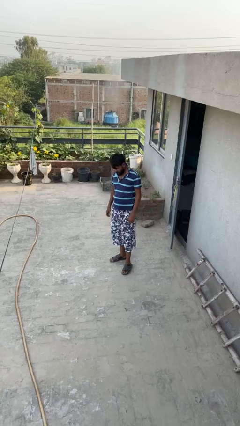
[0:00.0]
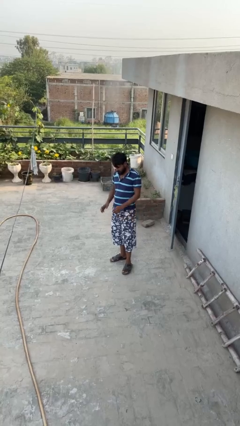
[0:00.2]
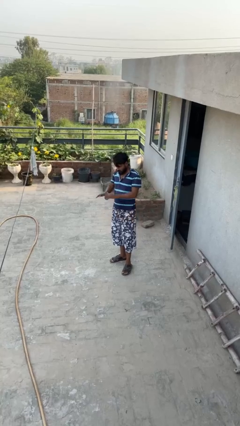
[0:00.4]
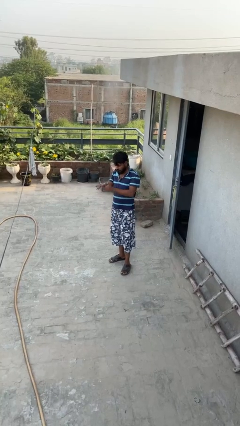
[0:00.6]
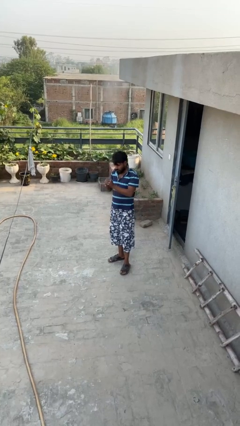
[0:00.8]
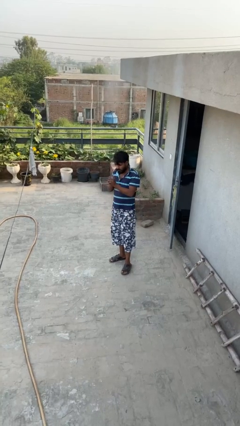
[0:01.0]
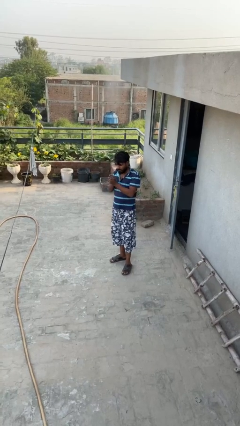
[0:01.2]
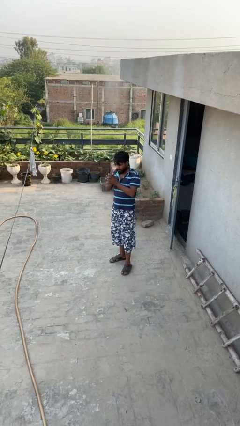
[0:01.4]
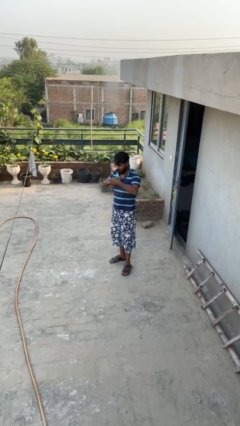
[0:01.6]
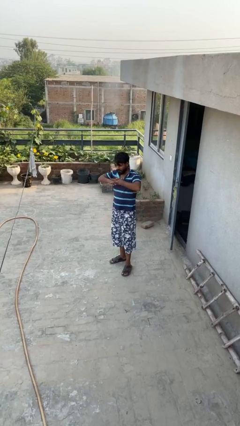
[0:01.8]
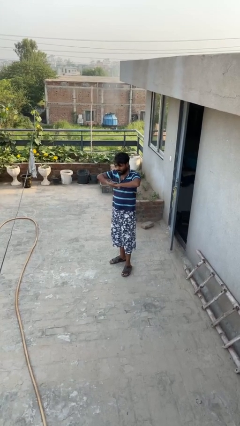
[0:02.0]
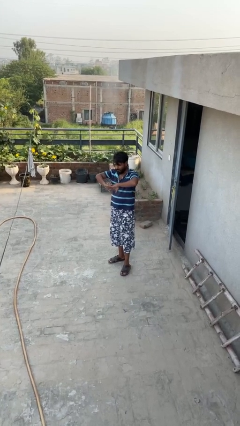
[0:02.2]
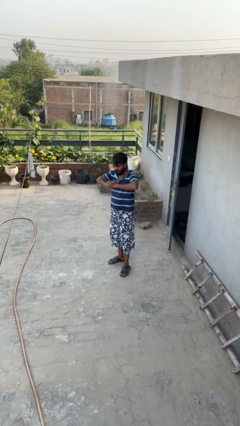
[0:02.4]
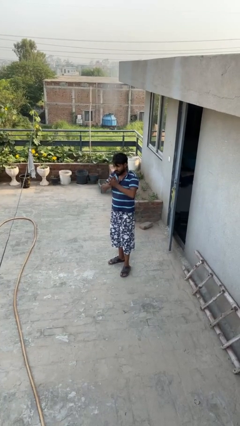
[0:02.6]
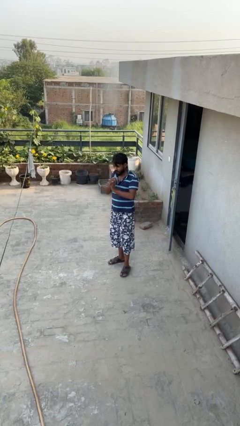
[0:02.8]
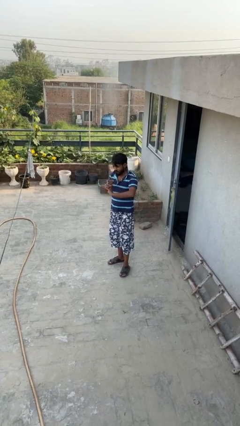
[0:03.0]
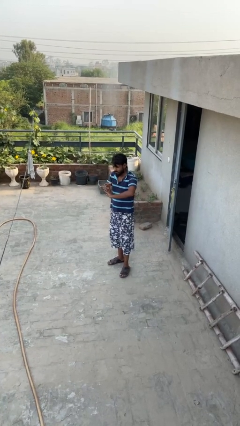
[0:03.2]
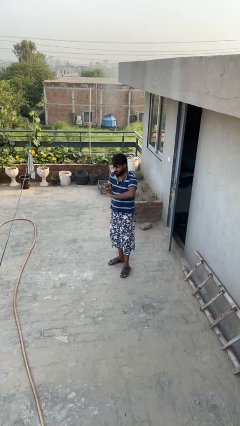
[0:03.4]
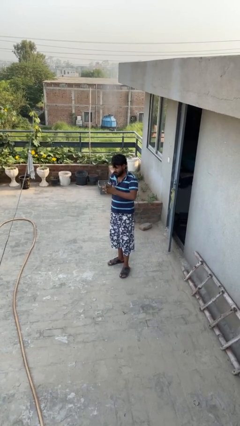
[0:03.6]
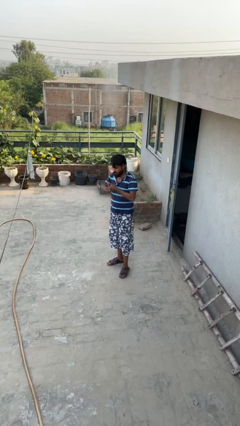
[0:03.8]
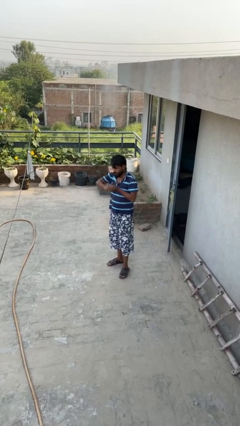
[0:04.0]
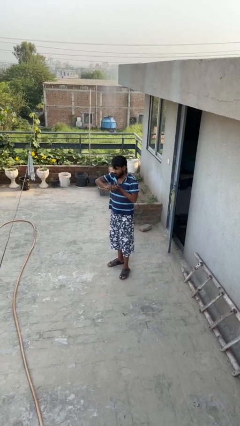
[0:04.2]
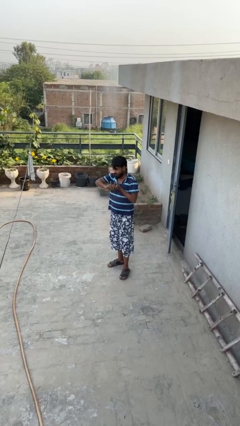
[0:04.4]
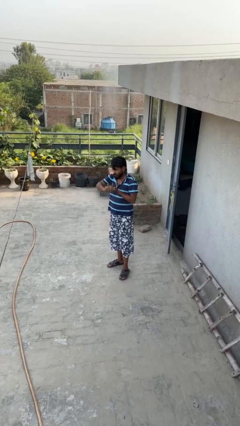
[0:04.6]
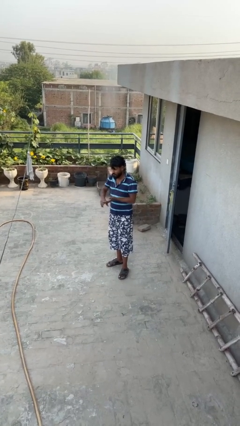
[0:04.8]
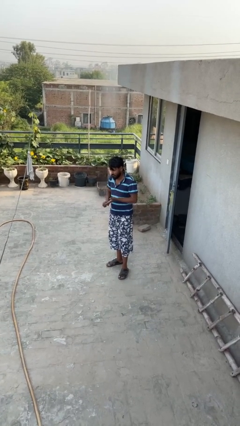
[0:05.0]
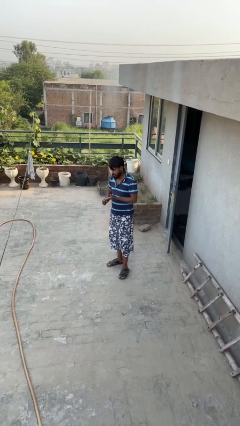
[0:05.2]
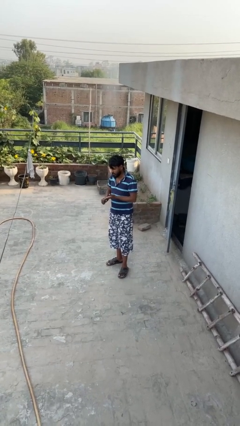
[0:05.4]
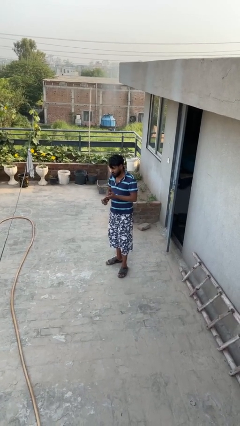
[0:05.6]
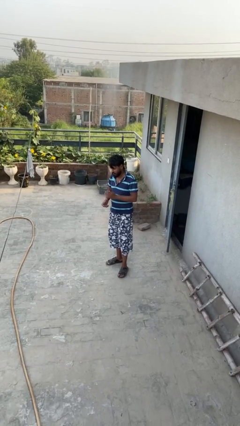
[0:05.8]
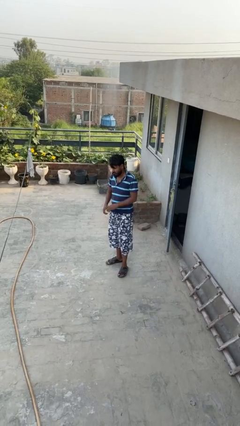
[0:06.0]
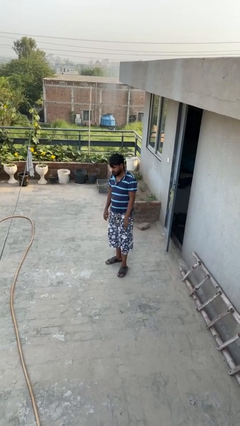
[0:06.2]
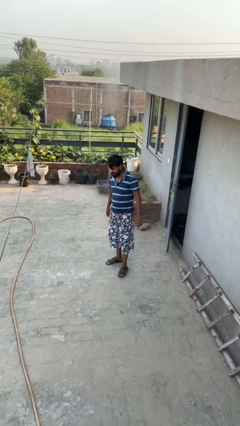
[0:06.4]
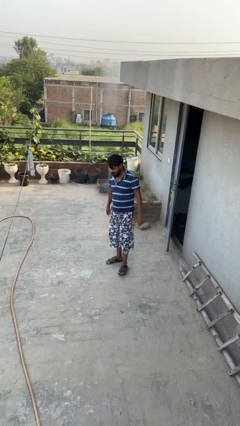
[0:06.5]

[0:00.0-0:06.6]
person cracks knuckles

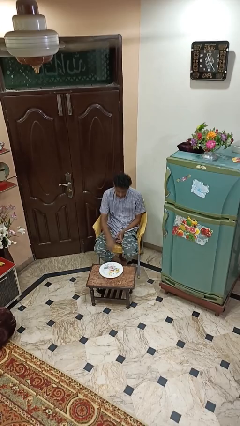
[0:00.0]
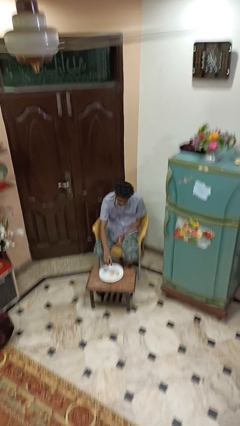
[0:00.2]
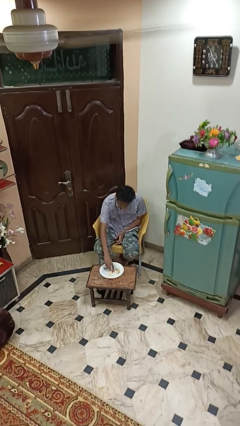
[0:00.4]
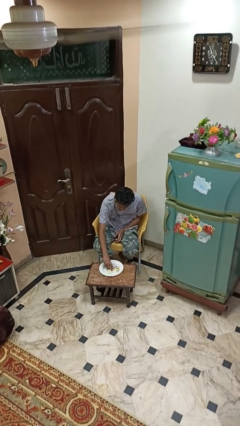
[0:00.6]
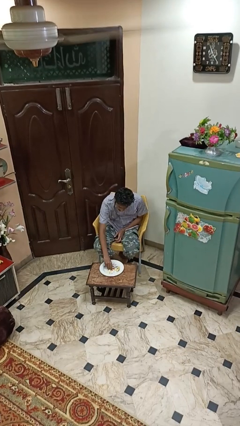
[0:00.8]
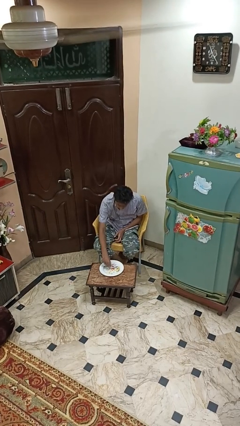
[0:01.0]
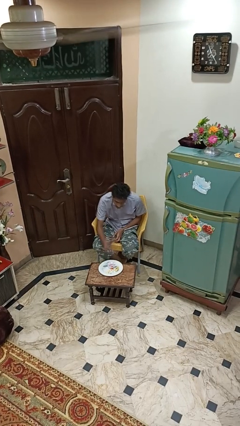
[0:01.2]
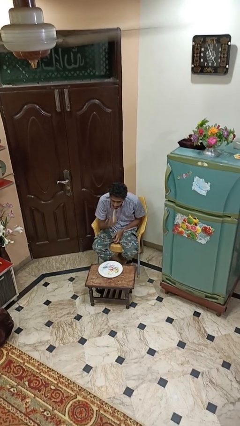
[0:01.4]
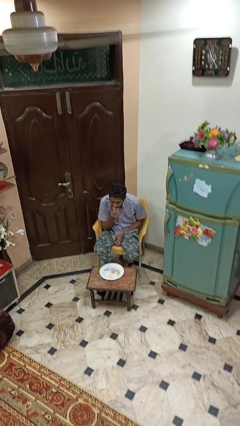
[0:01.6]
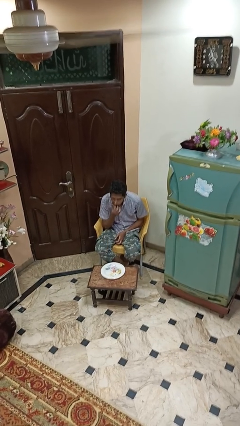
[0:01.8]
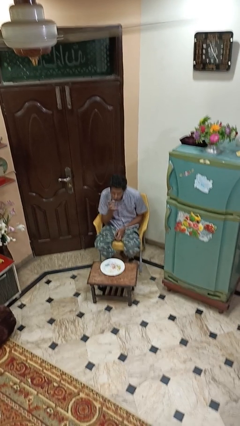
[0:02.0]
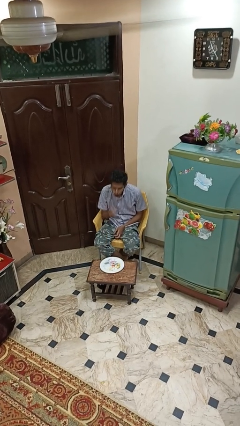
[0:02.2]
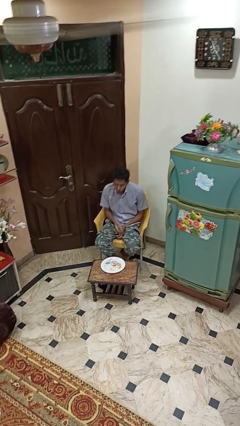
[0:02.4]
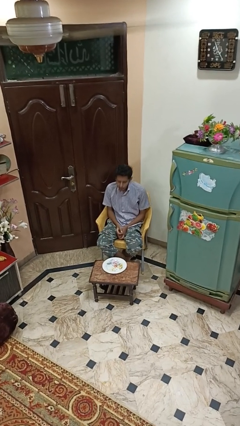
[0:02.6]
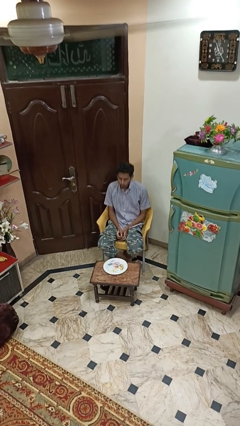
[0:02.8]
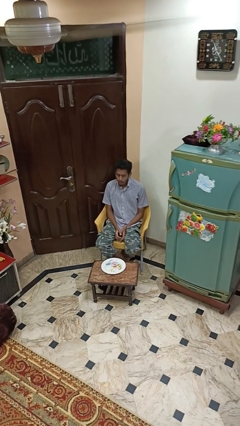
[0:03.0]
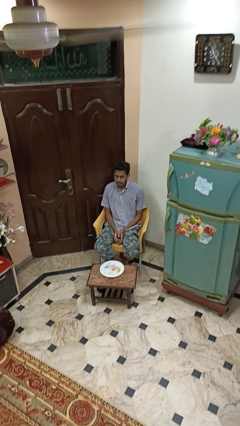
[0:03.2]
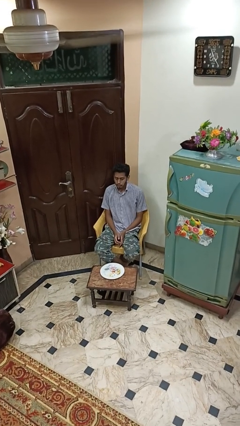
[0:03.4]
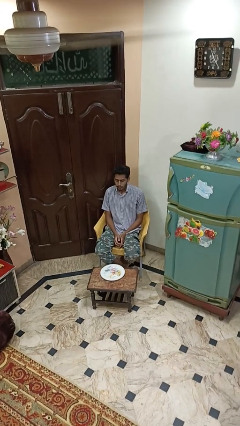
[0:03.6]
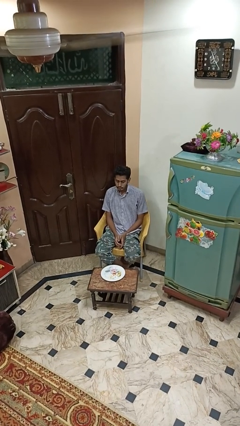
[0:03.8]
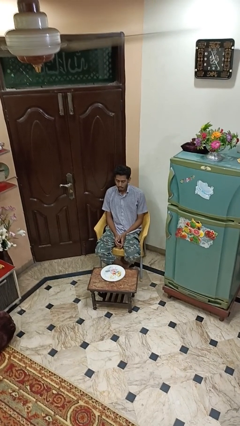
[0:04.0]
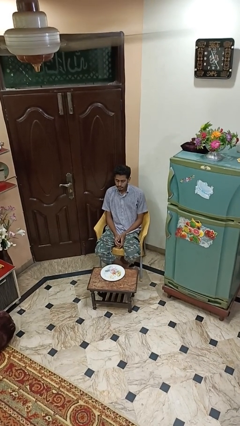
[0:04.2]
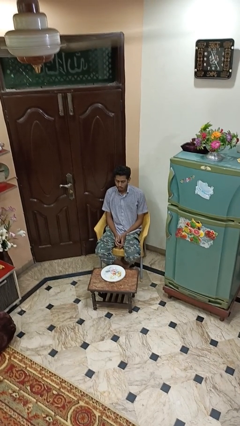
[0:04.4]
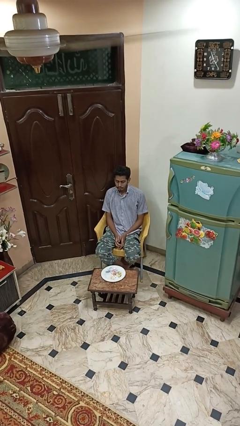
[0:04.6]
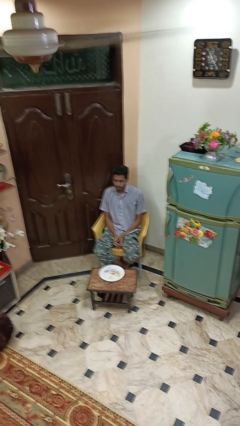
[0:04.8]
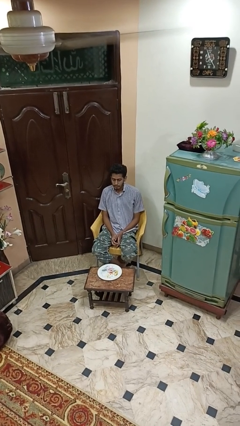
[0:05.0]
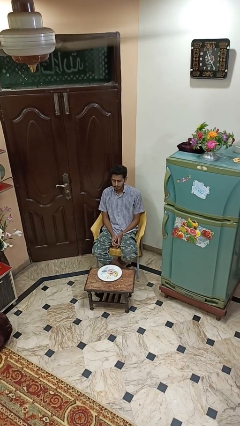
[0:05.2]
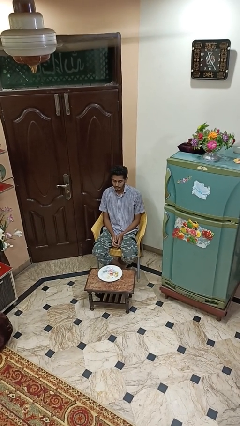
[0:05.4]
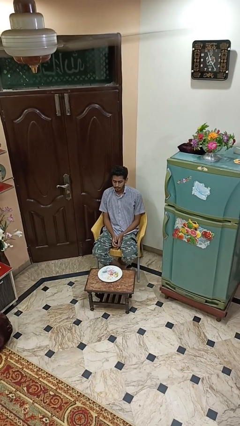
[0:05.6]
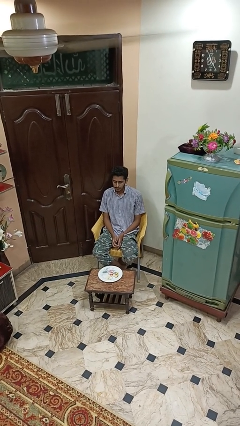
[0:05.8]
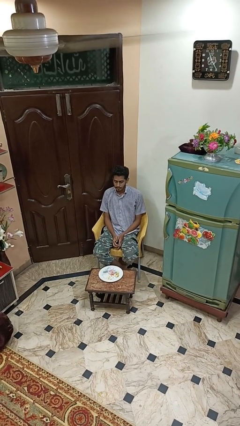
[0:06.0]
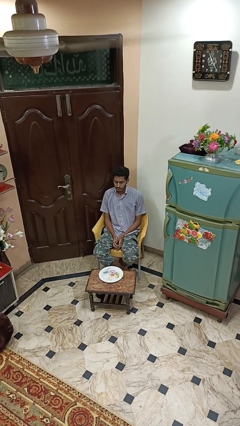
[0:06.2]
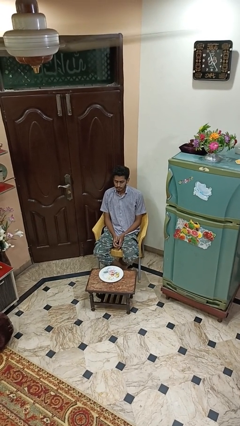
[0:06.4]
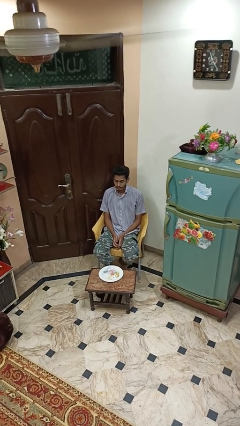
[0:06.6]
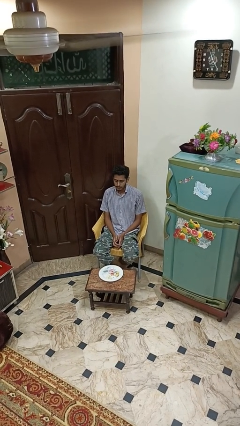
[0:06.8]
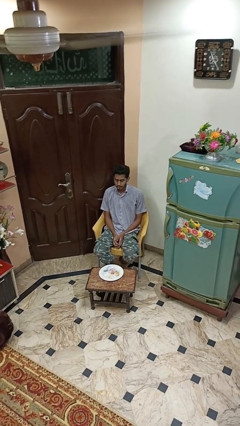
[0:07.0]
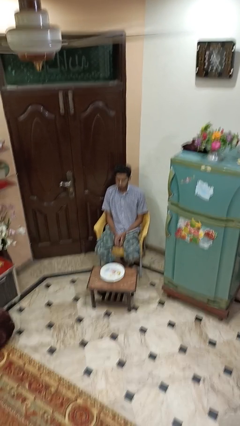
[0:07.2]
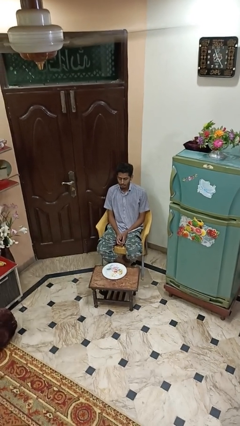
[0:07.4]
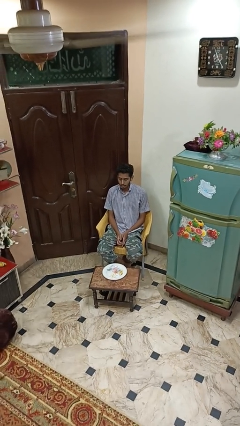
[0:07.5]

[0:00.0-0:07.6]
person eats with hands

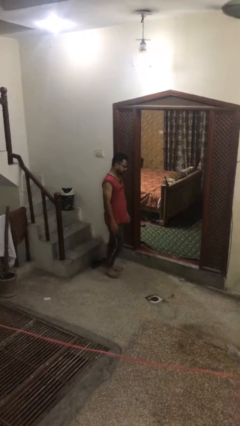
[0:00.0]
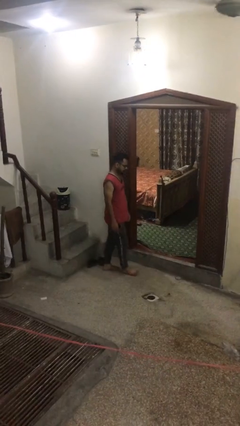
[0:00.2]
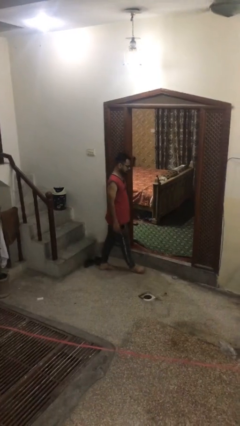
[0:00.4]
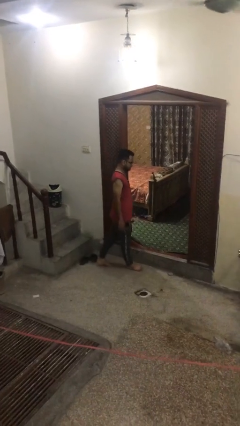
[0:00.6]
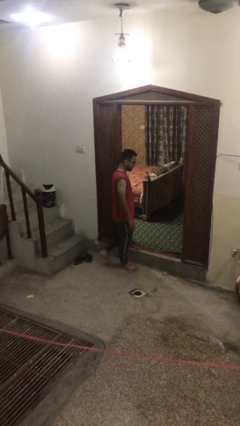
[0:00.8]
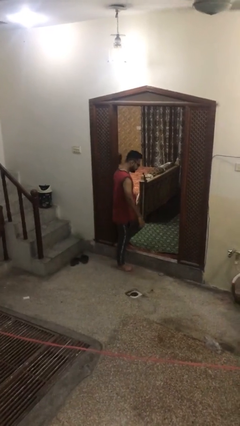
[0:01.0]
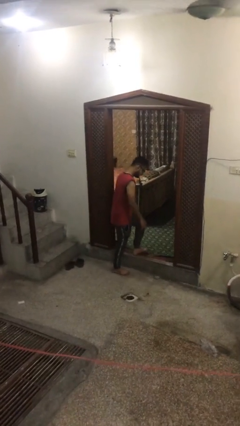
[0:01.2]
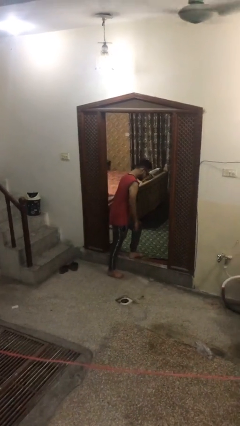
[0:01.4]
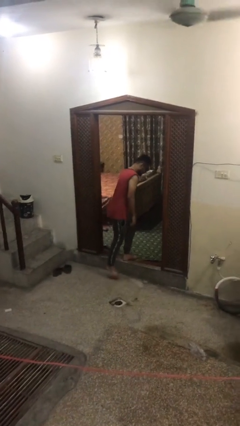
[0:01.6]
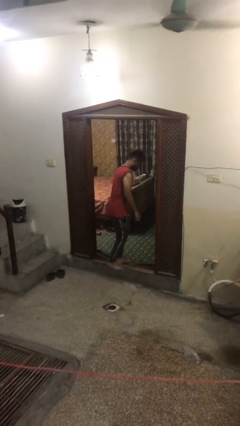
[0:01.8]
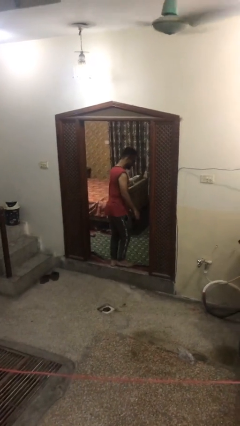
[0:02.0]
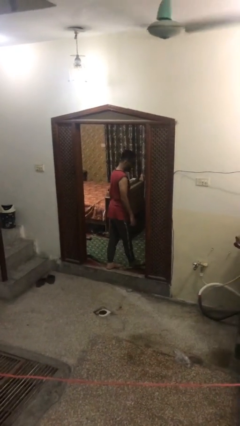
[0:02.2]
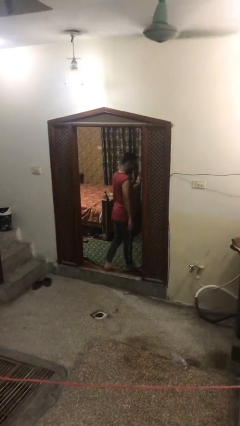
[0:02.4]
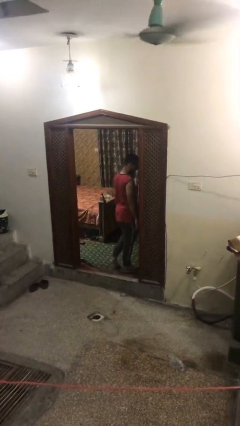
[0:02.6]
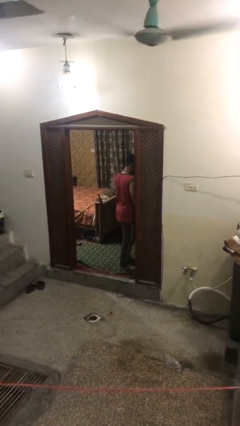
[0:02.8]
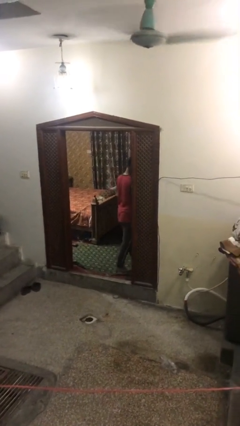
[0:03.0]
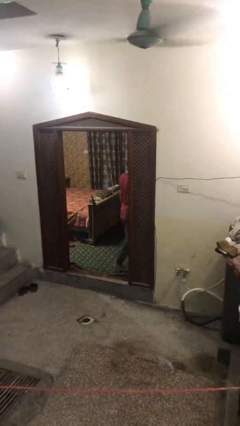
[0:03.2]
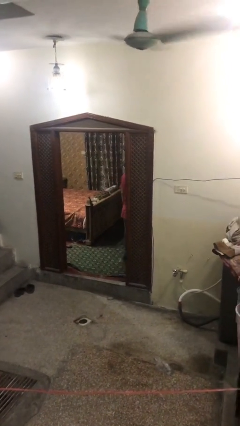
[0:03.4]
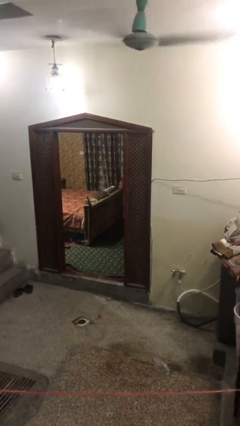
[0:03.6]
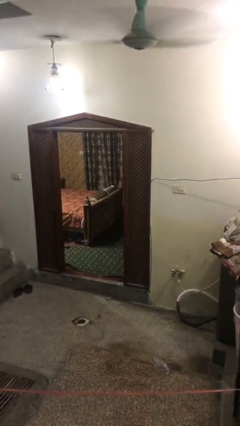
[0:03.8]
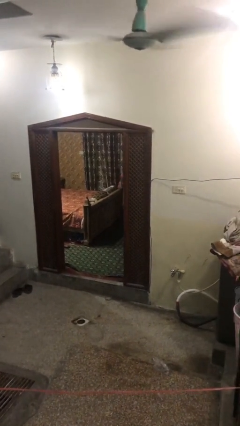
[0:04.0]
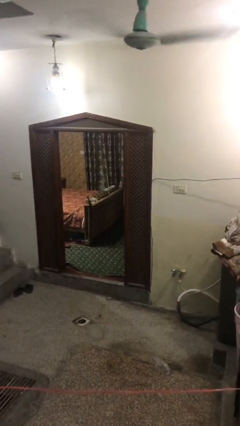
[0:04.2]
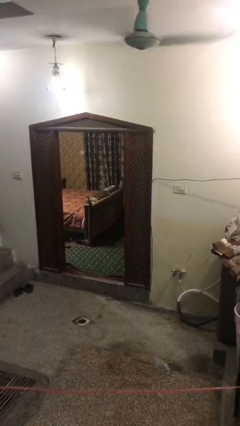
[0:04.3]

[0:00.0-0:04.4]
person exits scene through structure
